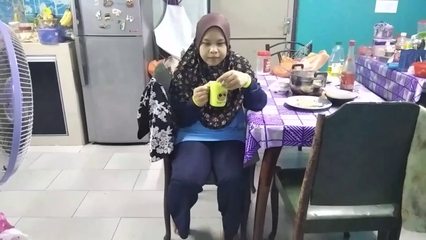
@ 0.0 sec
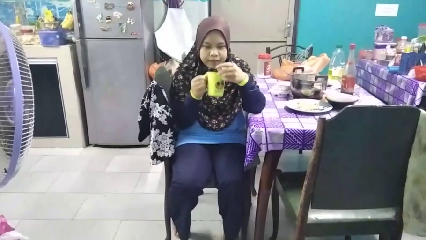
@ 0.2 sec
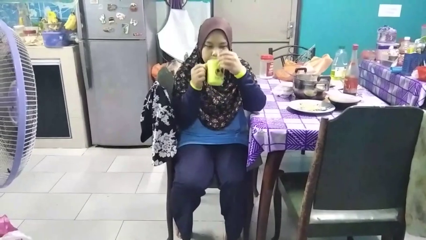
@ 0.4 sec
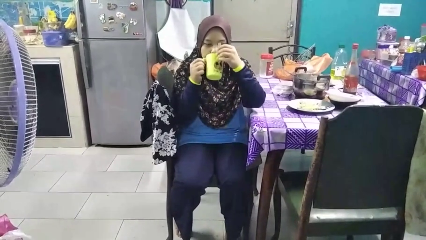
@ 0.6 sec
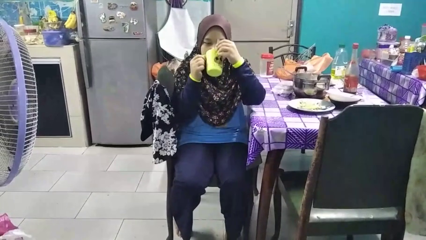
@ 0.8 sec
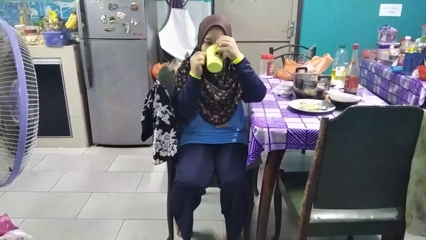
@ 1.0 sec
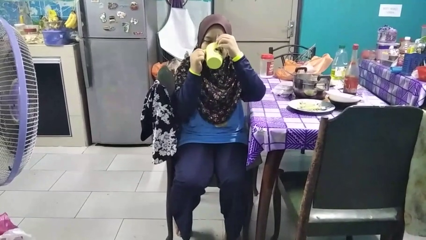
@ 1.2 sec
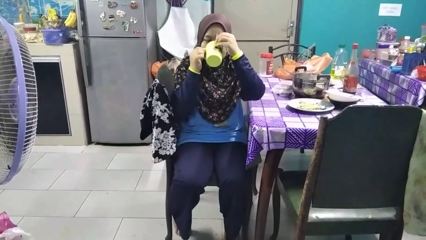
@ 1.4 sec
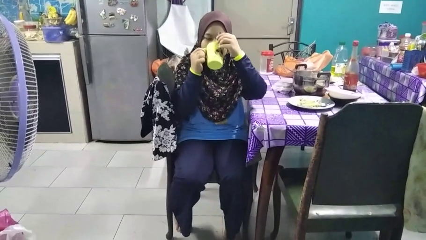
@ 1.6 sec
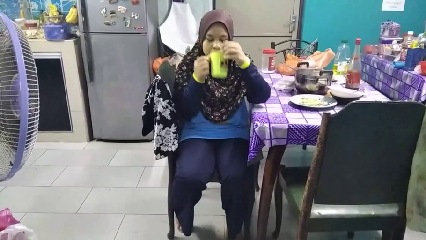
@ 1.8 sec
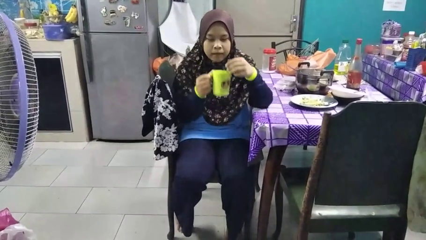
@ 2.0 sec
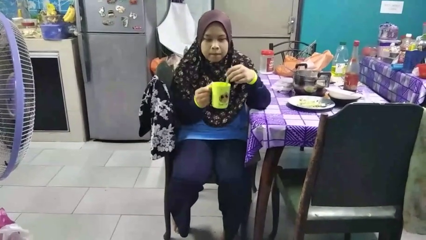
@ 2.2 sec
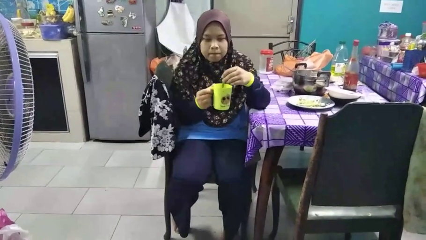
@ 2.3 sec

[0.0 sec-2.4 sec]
person drinks from mug

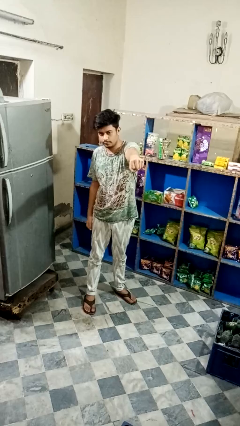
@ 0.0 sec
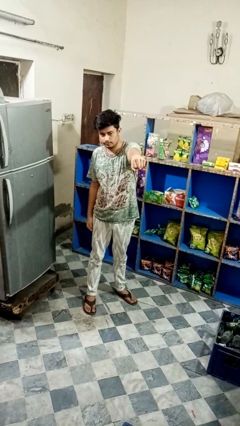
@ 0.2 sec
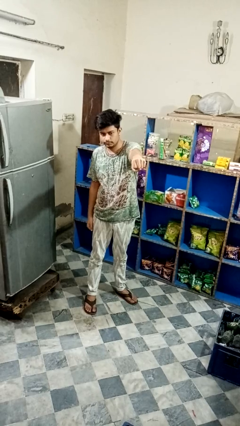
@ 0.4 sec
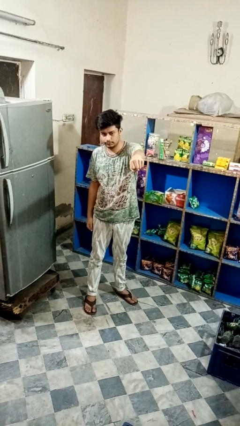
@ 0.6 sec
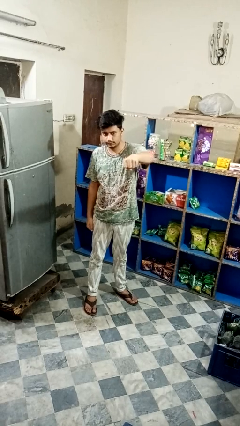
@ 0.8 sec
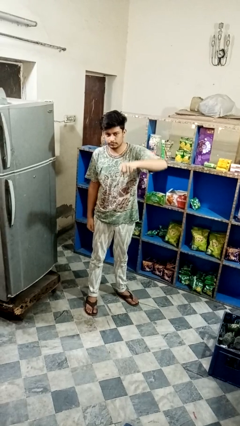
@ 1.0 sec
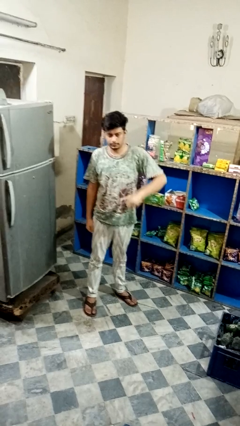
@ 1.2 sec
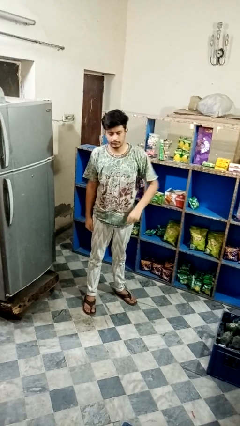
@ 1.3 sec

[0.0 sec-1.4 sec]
person punches

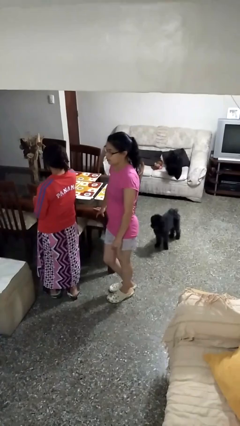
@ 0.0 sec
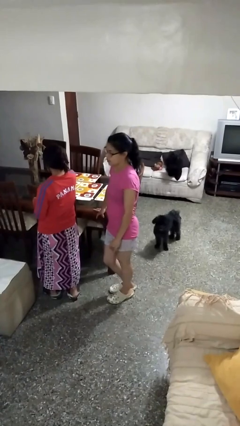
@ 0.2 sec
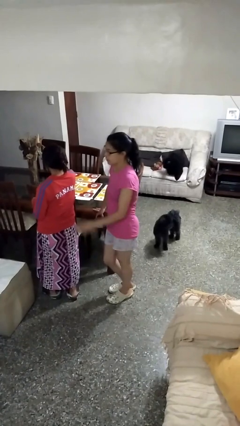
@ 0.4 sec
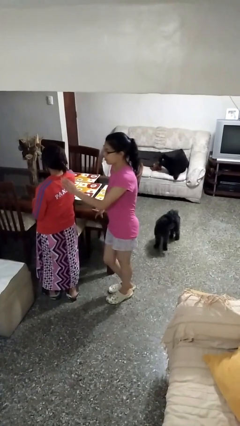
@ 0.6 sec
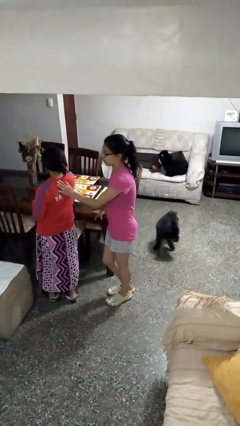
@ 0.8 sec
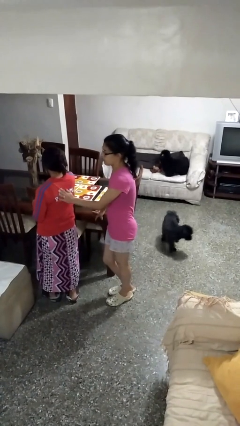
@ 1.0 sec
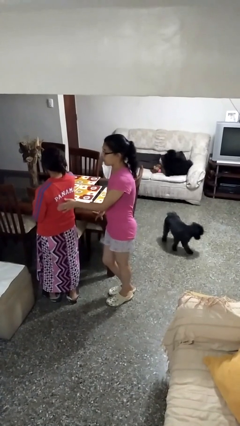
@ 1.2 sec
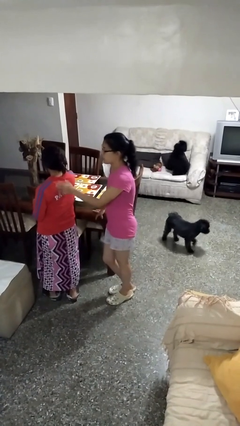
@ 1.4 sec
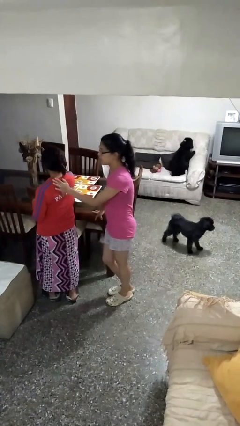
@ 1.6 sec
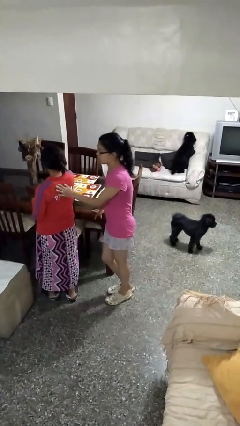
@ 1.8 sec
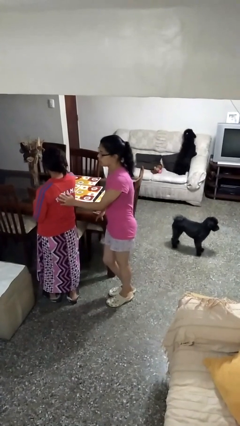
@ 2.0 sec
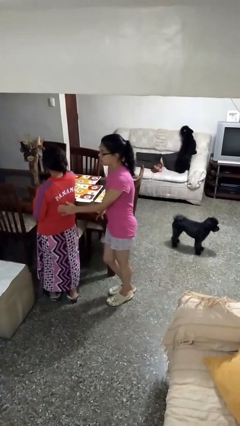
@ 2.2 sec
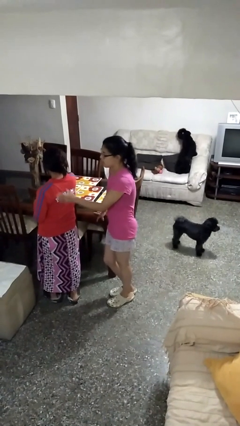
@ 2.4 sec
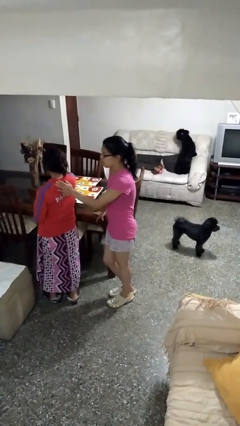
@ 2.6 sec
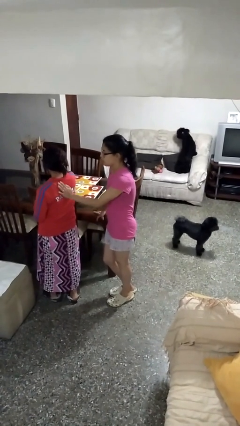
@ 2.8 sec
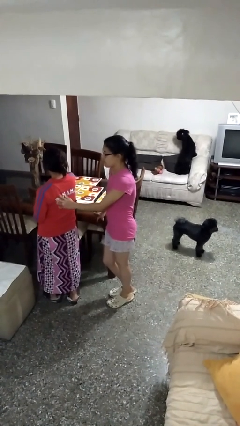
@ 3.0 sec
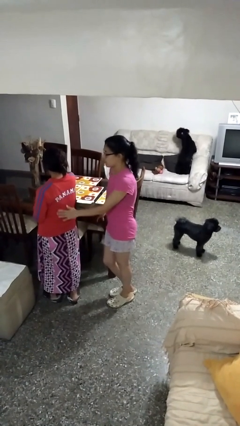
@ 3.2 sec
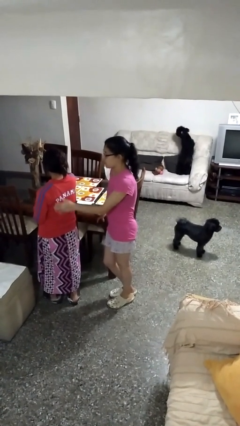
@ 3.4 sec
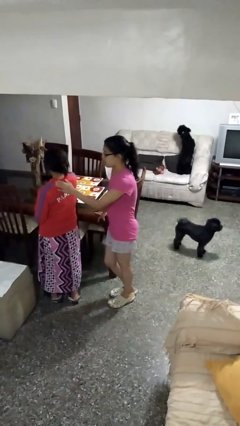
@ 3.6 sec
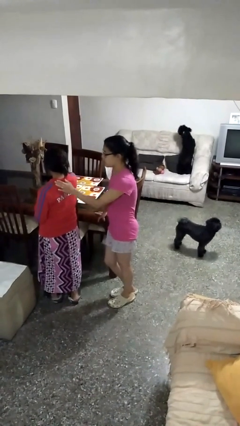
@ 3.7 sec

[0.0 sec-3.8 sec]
person touches back of person

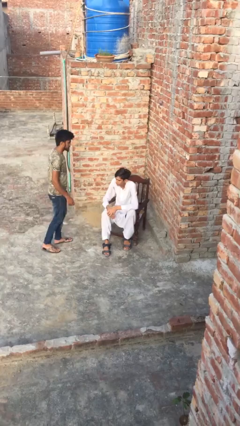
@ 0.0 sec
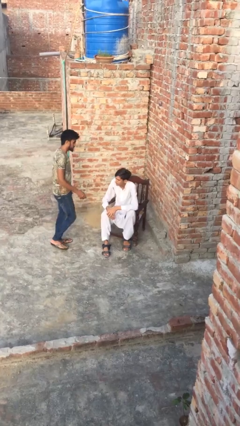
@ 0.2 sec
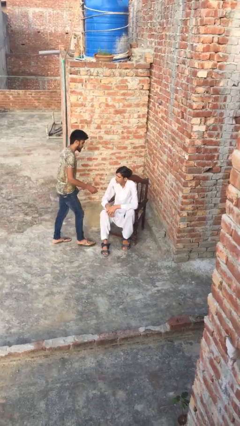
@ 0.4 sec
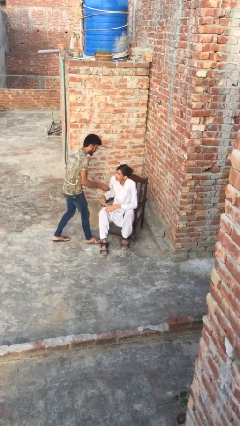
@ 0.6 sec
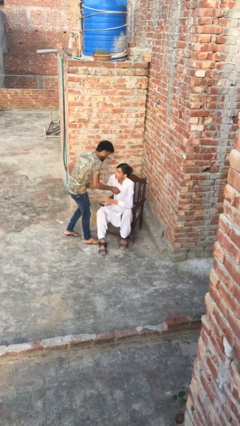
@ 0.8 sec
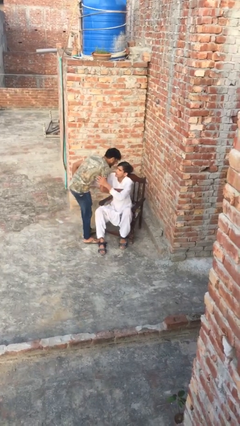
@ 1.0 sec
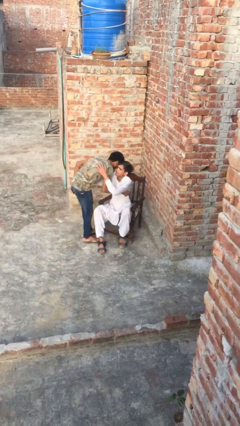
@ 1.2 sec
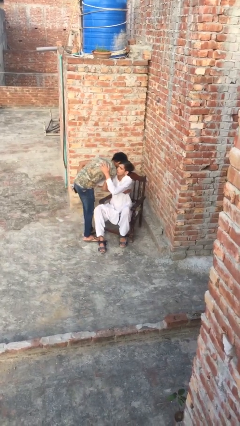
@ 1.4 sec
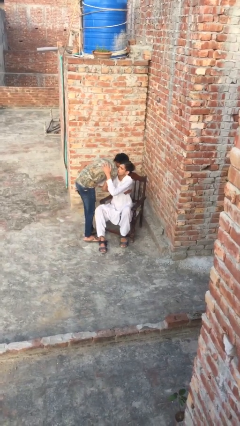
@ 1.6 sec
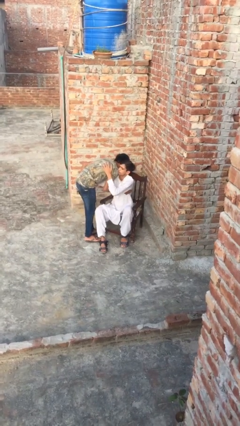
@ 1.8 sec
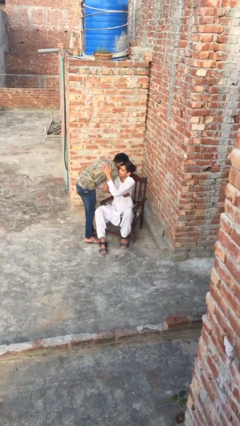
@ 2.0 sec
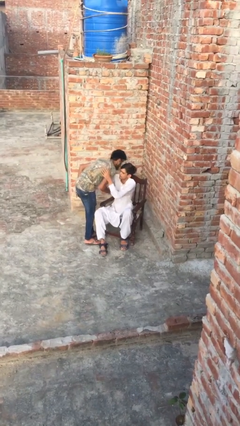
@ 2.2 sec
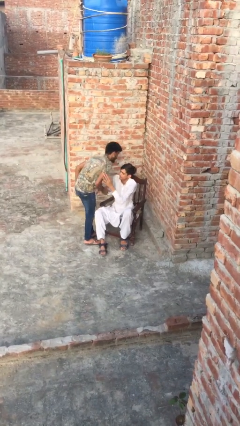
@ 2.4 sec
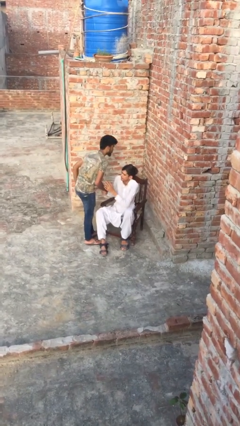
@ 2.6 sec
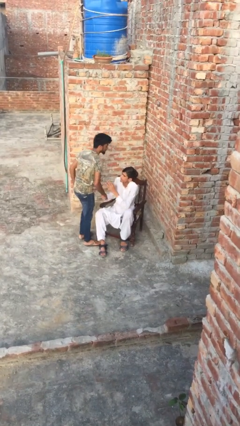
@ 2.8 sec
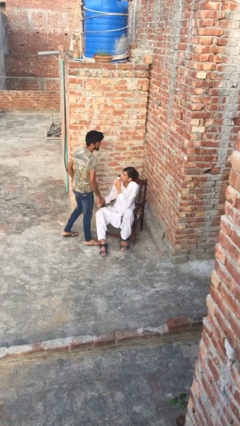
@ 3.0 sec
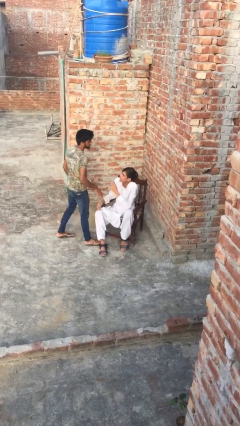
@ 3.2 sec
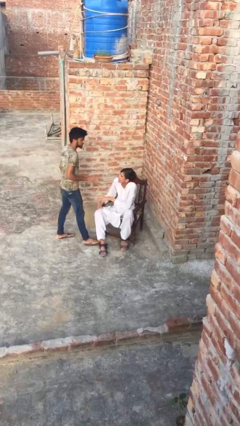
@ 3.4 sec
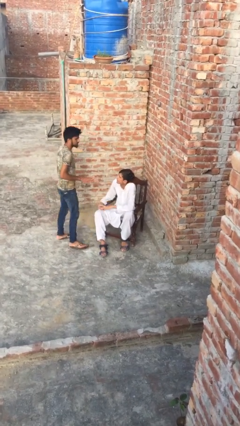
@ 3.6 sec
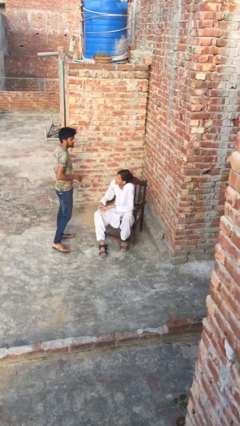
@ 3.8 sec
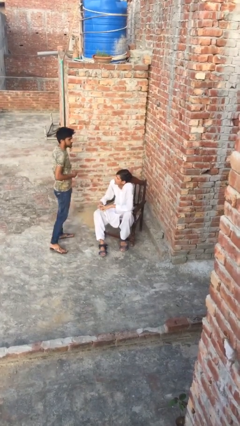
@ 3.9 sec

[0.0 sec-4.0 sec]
person embraces person

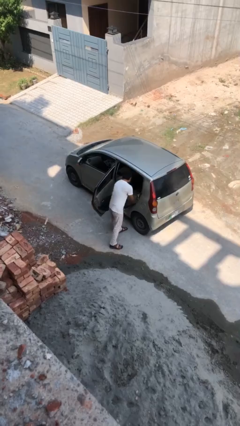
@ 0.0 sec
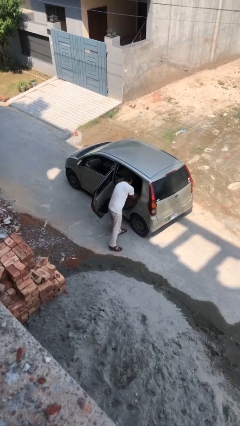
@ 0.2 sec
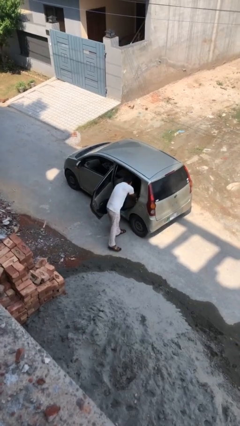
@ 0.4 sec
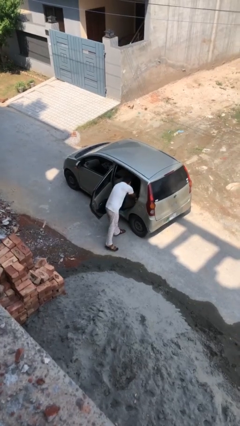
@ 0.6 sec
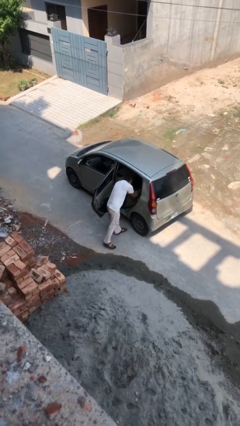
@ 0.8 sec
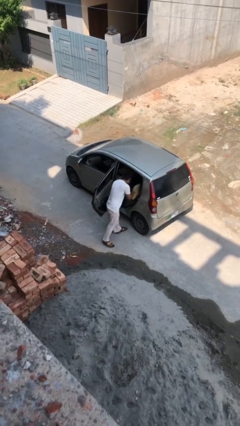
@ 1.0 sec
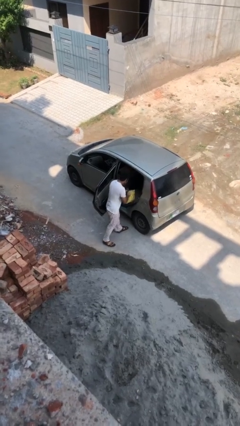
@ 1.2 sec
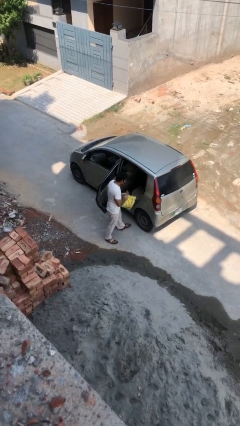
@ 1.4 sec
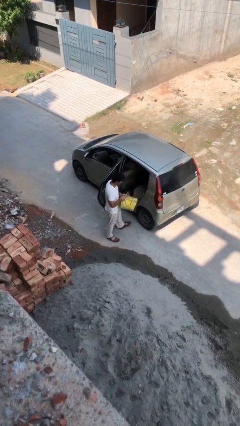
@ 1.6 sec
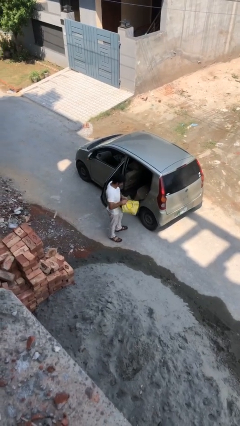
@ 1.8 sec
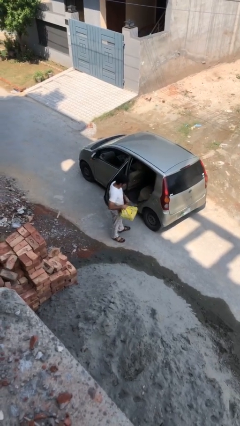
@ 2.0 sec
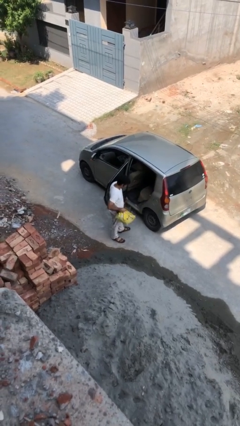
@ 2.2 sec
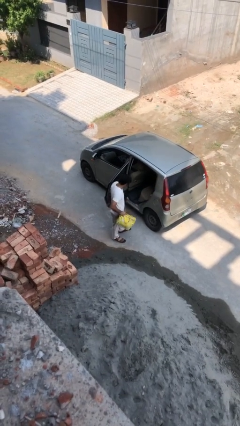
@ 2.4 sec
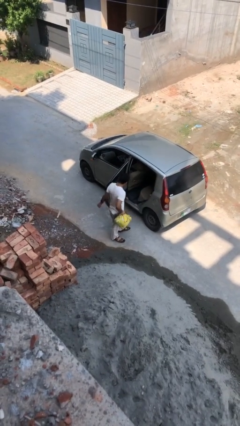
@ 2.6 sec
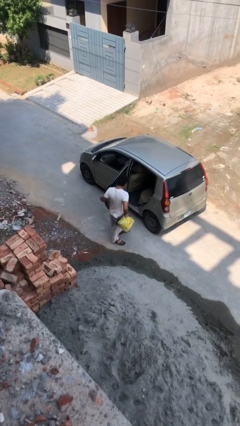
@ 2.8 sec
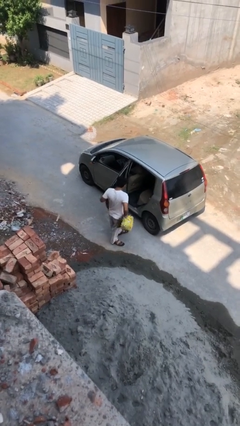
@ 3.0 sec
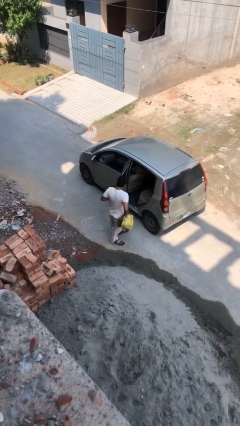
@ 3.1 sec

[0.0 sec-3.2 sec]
person unloads car

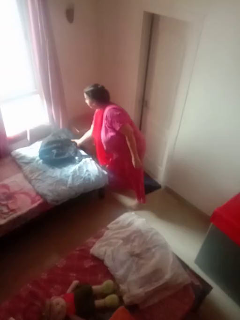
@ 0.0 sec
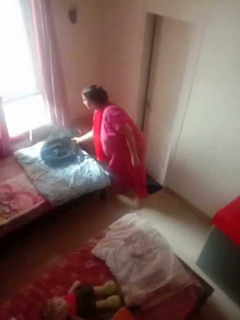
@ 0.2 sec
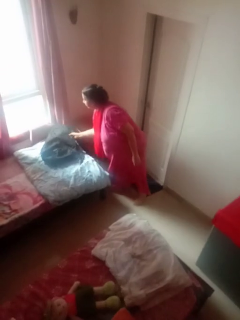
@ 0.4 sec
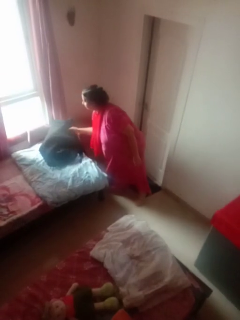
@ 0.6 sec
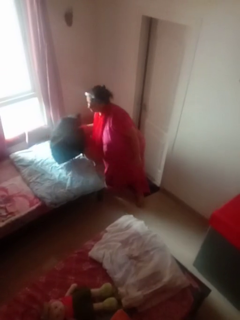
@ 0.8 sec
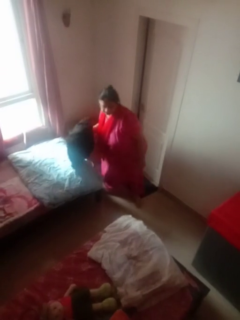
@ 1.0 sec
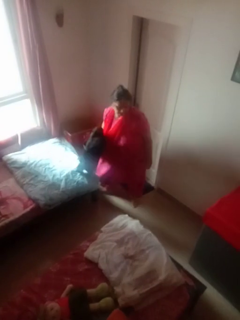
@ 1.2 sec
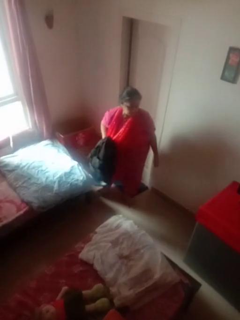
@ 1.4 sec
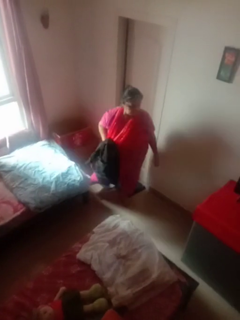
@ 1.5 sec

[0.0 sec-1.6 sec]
person picks up object from bed

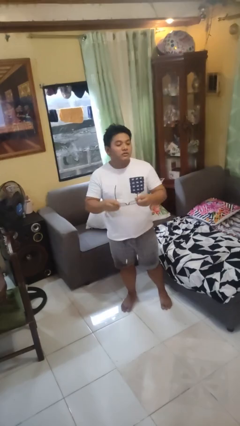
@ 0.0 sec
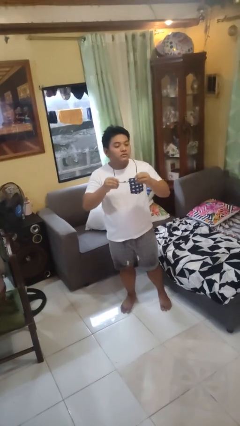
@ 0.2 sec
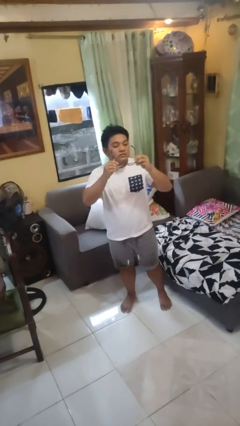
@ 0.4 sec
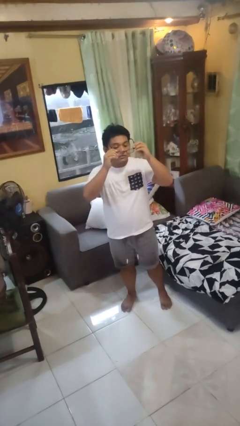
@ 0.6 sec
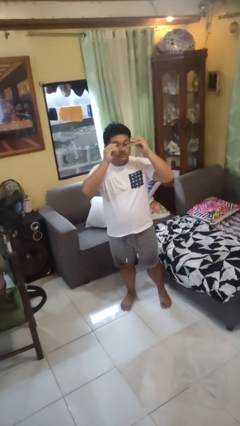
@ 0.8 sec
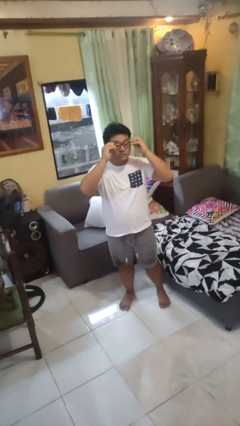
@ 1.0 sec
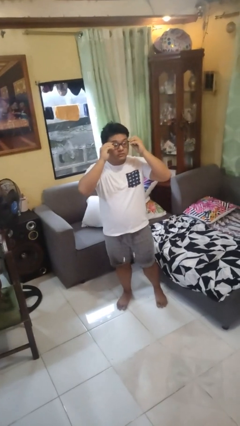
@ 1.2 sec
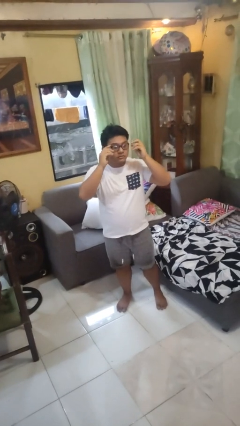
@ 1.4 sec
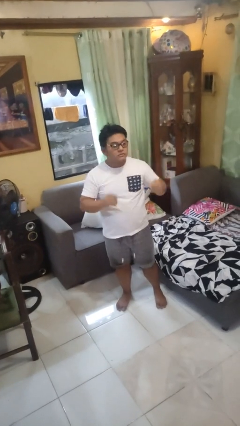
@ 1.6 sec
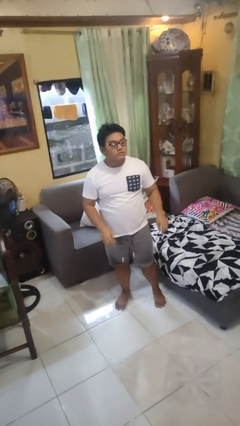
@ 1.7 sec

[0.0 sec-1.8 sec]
person puts on glasses
